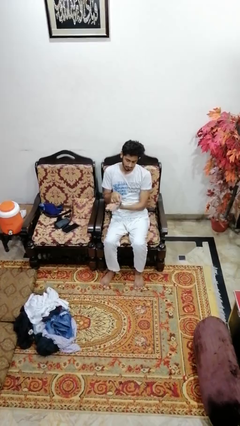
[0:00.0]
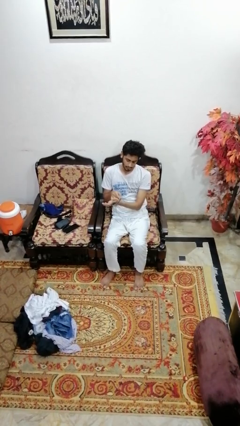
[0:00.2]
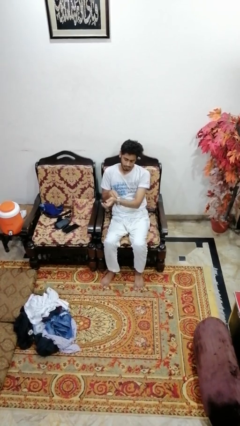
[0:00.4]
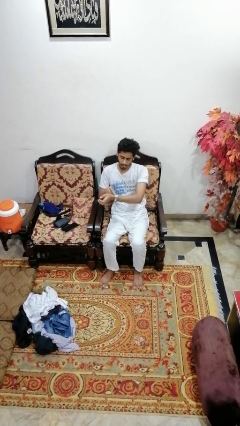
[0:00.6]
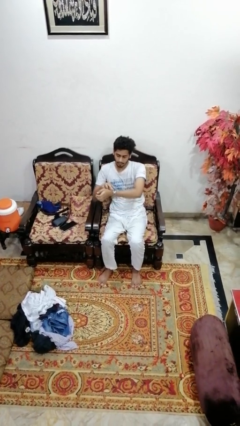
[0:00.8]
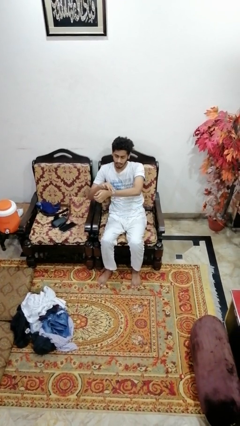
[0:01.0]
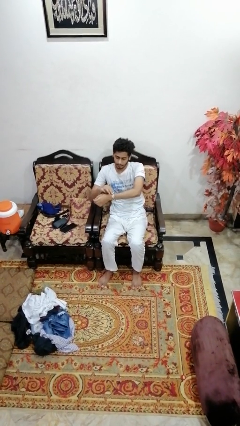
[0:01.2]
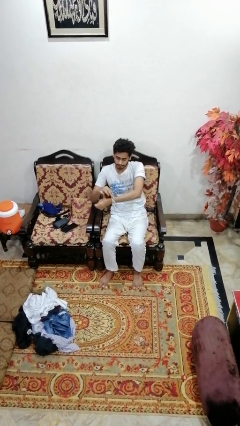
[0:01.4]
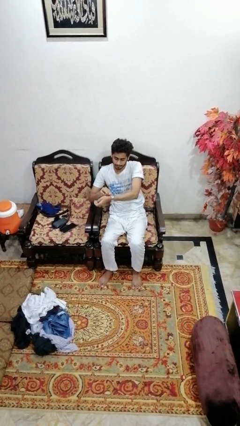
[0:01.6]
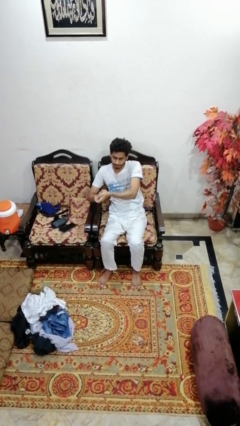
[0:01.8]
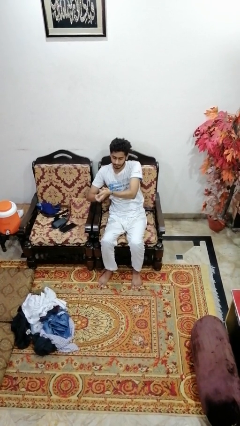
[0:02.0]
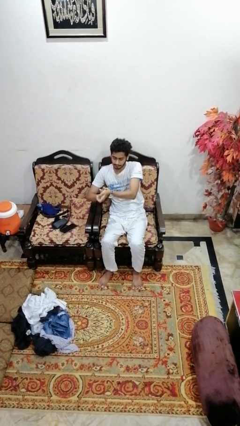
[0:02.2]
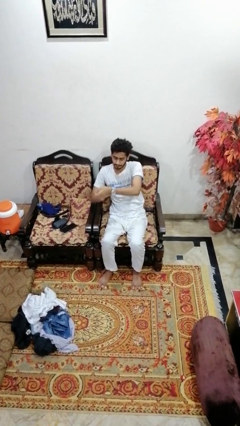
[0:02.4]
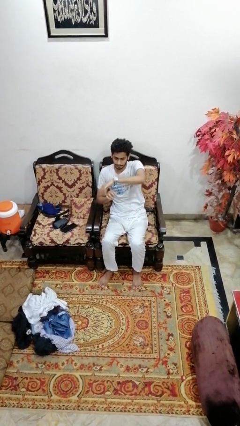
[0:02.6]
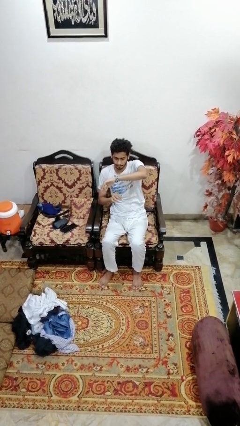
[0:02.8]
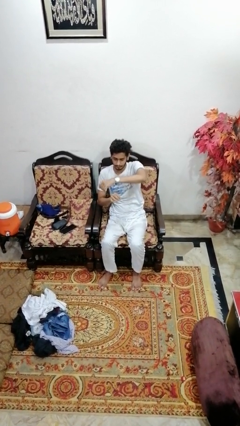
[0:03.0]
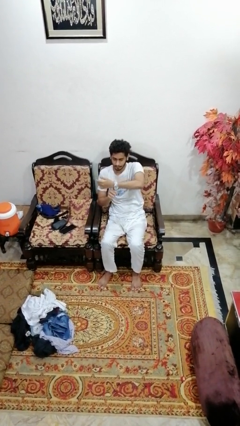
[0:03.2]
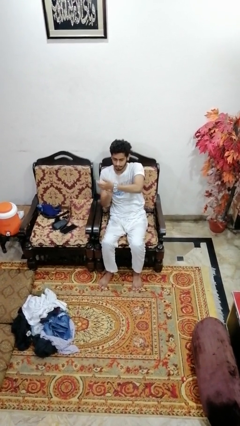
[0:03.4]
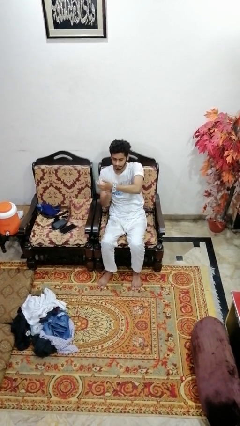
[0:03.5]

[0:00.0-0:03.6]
person puts on wristwatch

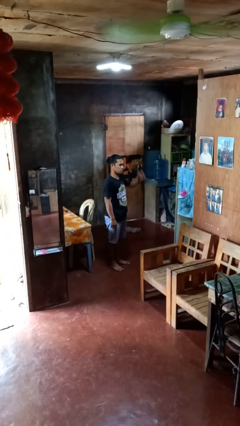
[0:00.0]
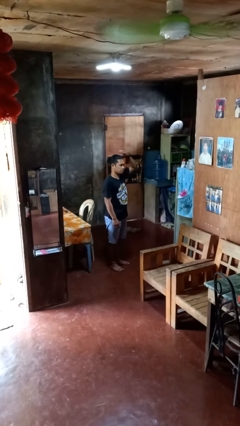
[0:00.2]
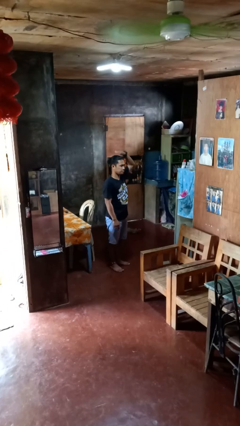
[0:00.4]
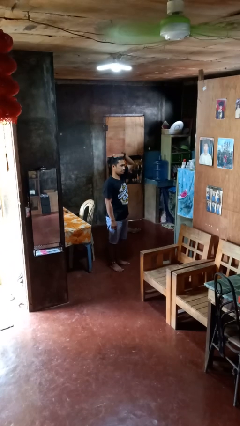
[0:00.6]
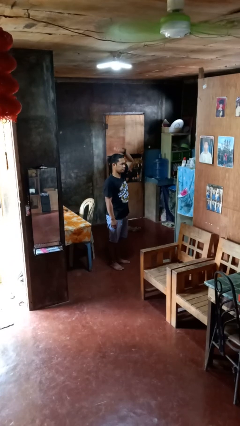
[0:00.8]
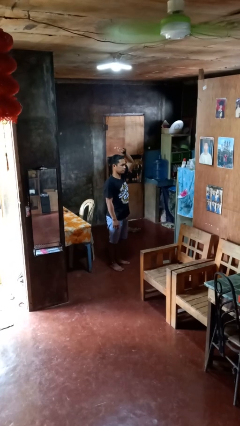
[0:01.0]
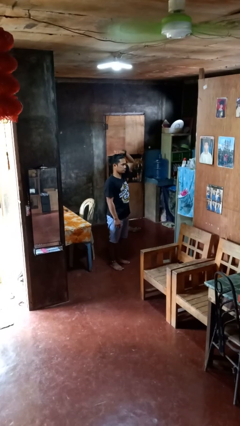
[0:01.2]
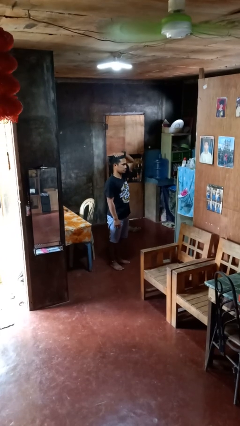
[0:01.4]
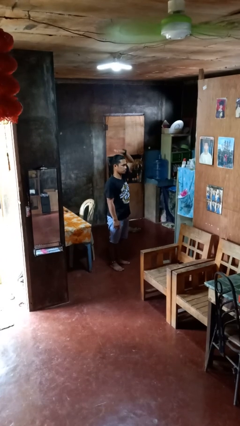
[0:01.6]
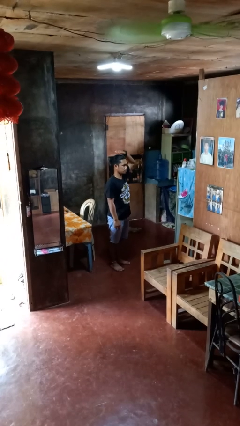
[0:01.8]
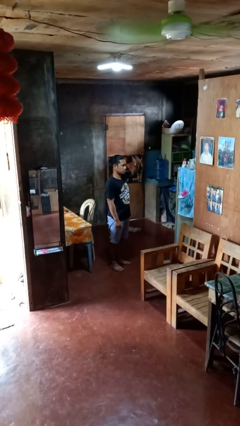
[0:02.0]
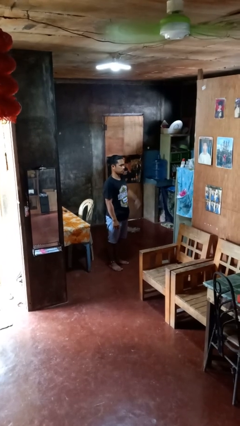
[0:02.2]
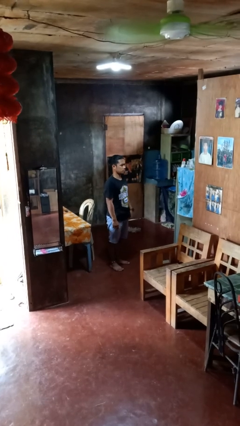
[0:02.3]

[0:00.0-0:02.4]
person pats head

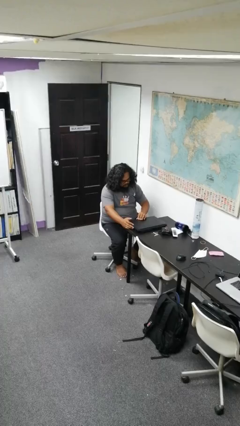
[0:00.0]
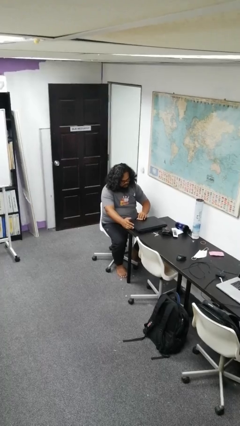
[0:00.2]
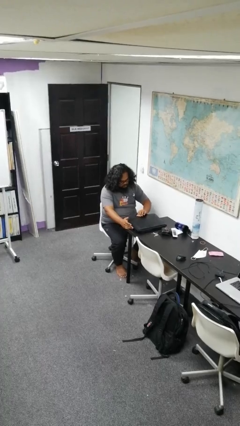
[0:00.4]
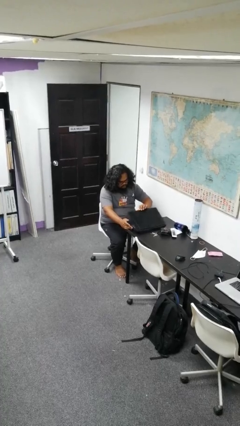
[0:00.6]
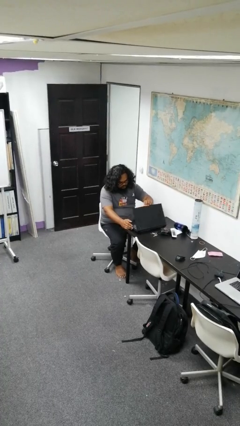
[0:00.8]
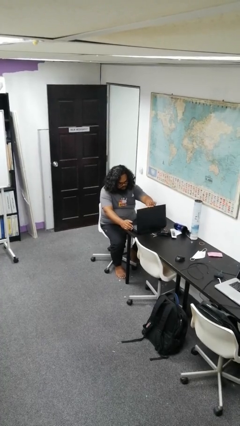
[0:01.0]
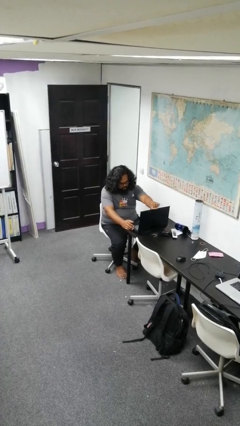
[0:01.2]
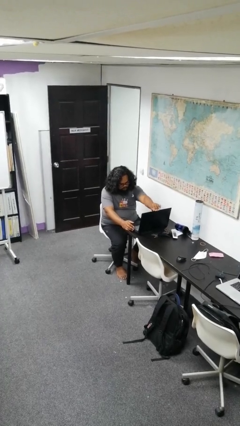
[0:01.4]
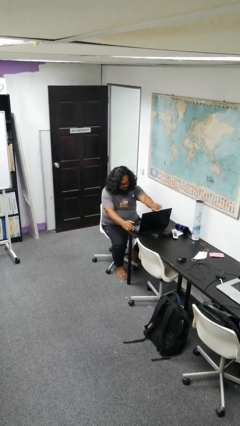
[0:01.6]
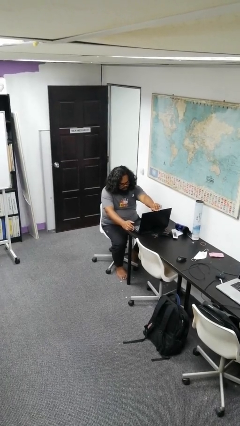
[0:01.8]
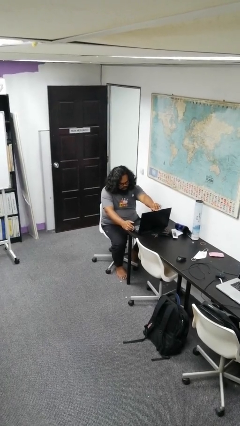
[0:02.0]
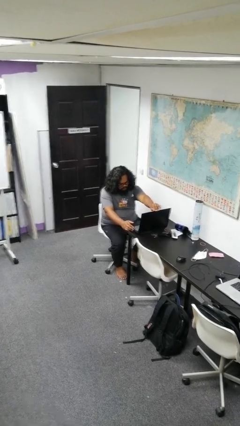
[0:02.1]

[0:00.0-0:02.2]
person opens laptop

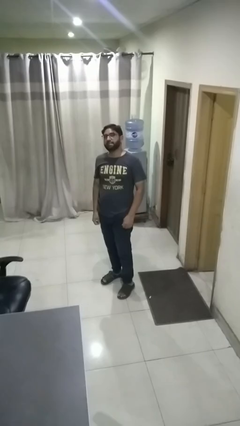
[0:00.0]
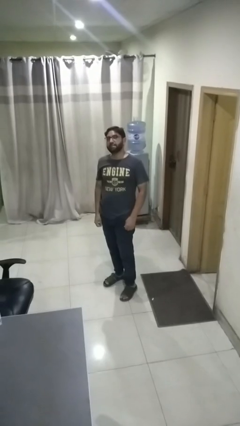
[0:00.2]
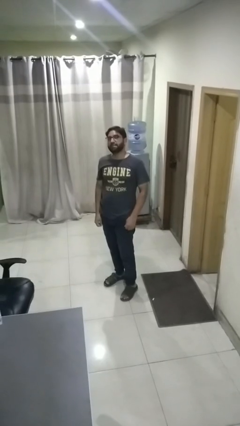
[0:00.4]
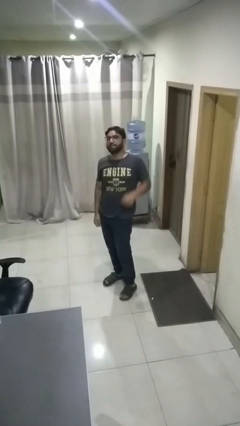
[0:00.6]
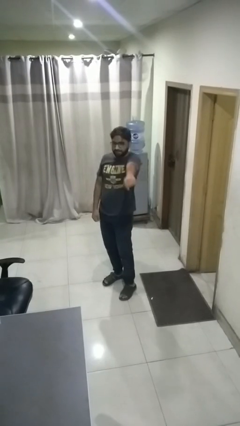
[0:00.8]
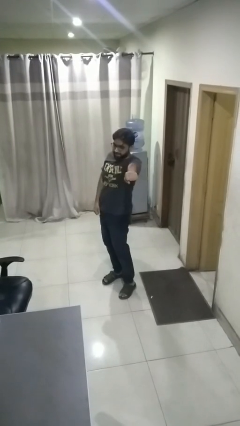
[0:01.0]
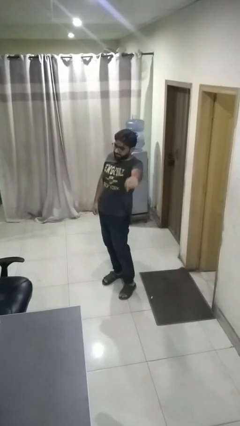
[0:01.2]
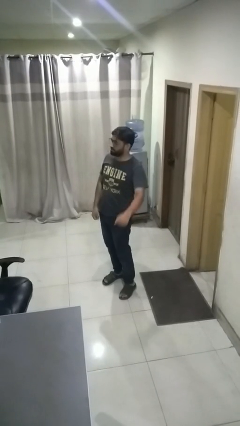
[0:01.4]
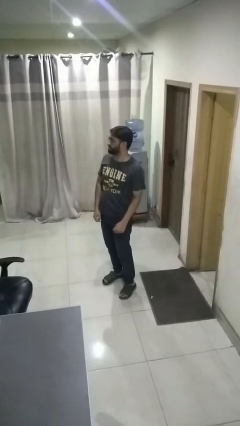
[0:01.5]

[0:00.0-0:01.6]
person punches

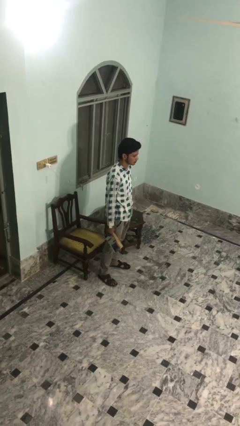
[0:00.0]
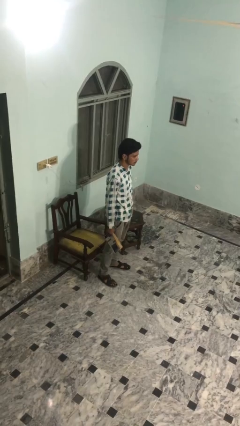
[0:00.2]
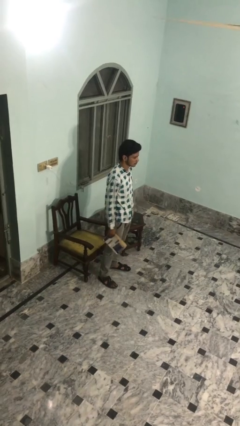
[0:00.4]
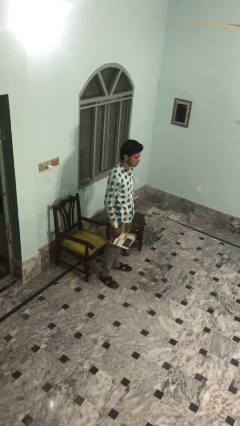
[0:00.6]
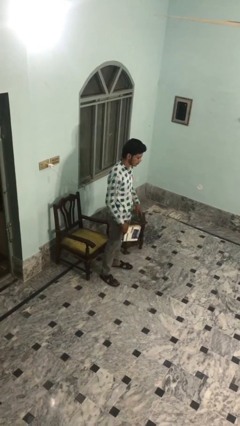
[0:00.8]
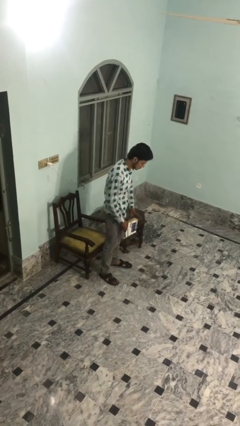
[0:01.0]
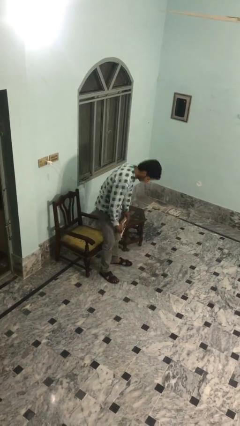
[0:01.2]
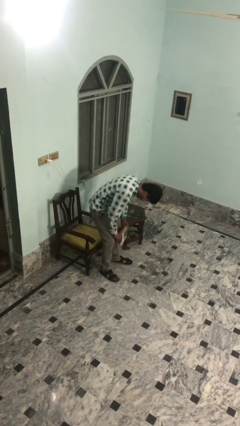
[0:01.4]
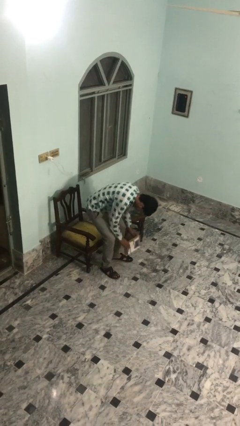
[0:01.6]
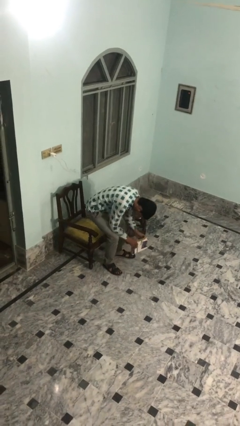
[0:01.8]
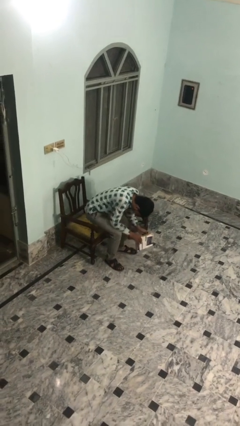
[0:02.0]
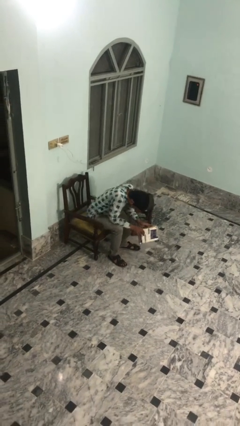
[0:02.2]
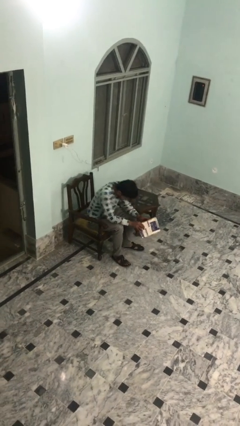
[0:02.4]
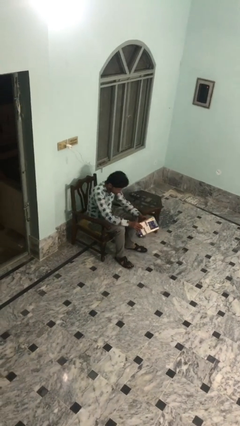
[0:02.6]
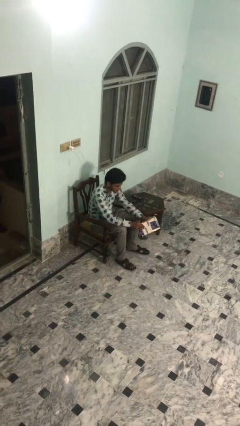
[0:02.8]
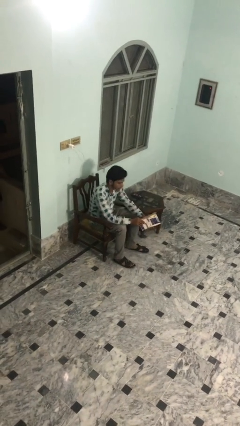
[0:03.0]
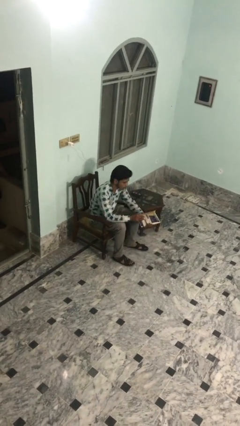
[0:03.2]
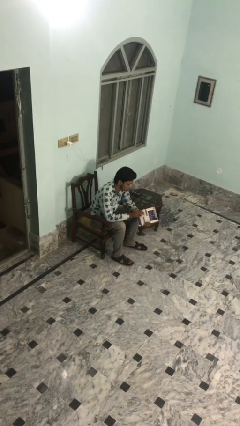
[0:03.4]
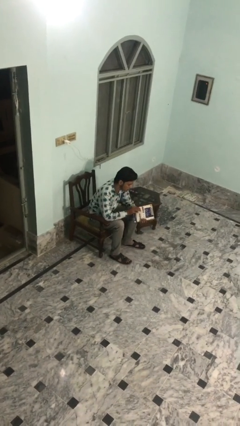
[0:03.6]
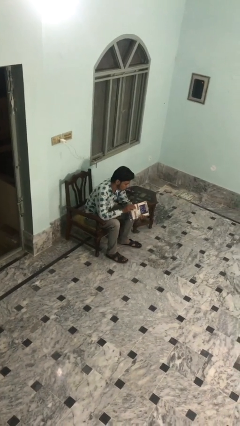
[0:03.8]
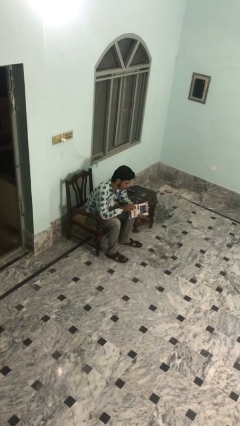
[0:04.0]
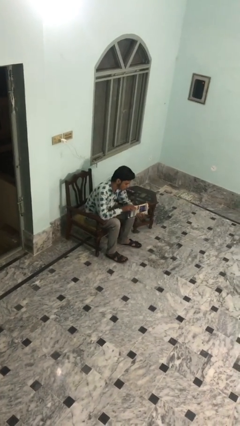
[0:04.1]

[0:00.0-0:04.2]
person sits down

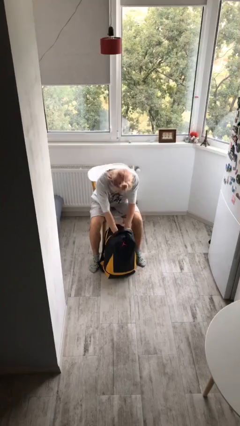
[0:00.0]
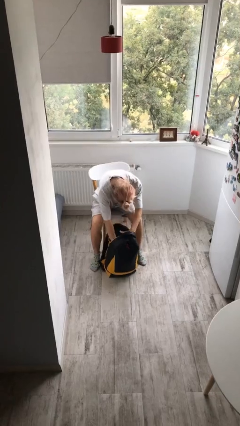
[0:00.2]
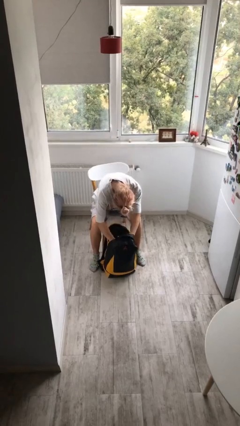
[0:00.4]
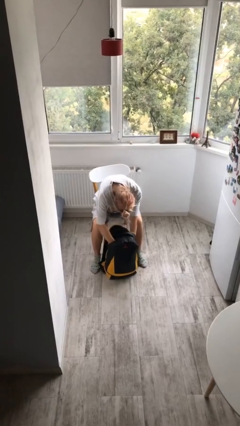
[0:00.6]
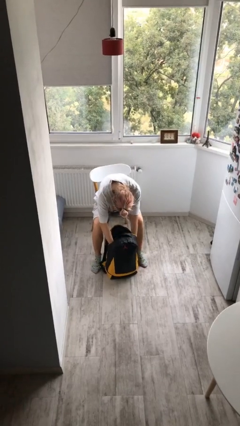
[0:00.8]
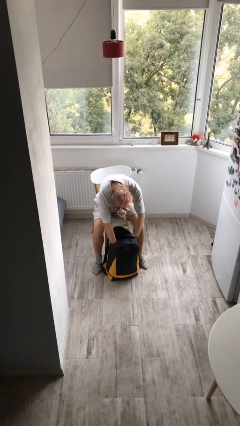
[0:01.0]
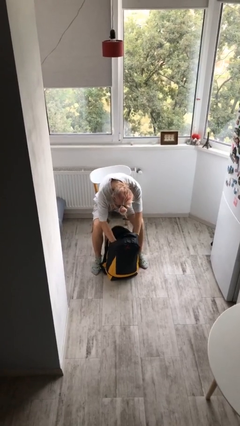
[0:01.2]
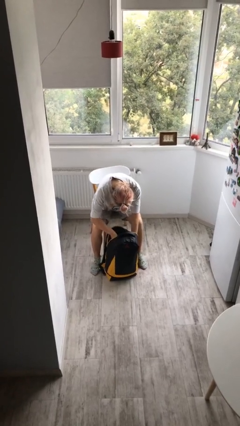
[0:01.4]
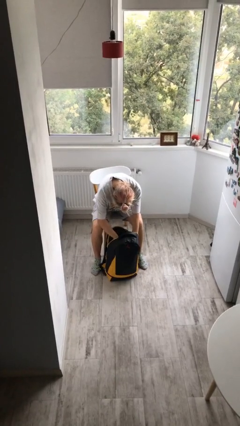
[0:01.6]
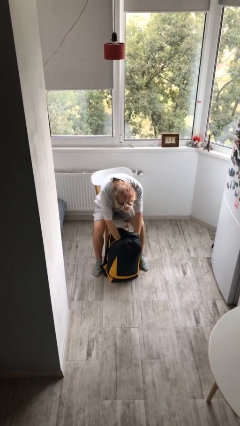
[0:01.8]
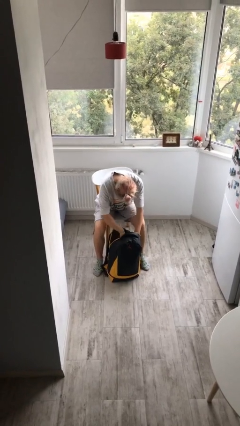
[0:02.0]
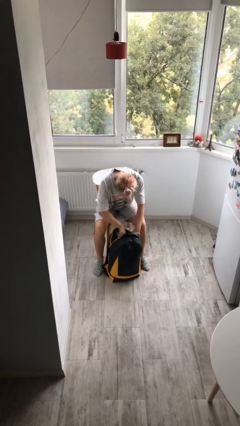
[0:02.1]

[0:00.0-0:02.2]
person searches in backpack

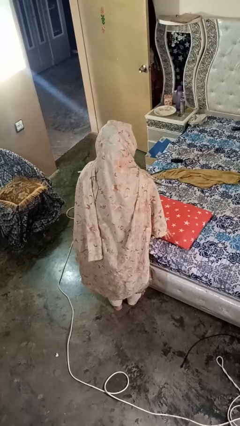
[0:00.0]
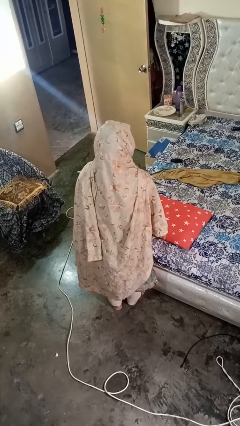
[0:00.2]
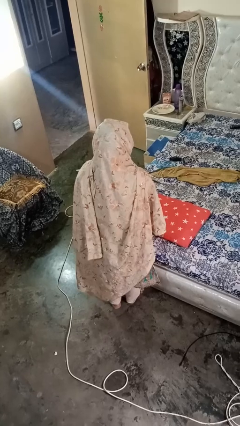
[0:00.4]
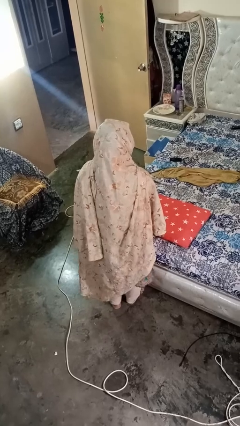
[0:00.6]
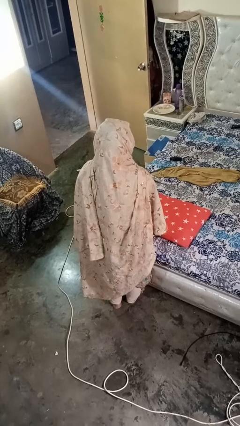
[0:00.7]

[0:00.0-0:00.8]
person waves hand over object

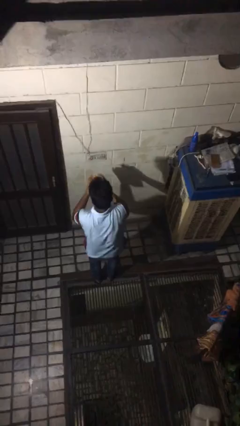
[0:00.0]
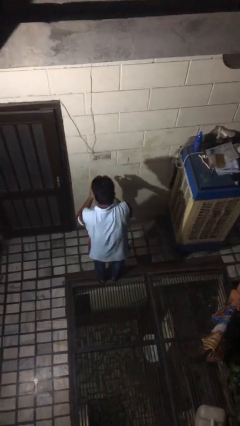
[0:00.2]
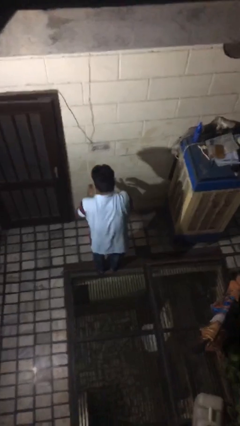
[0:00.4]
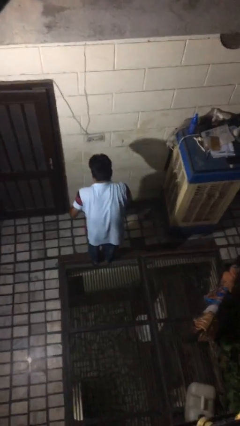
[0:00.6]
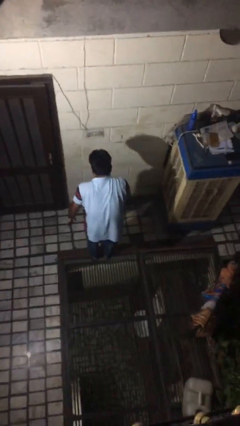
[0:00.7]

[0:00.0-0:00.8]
person catches dropped object
